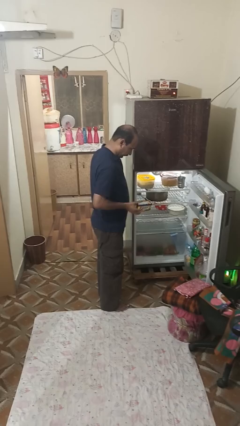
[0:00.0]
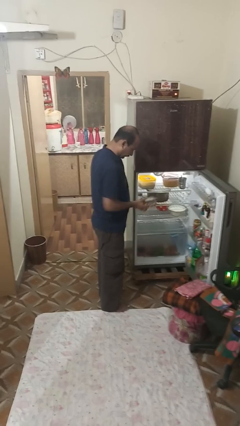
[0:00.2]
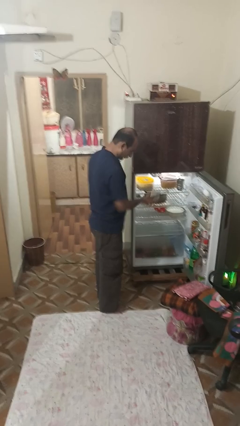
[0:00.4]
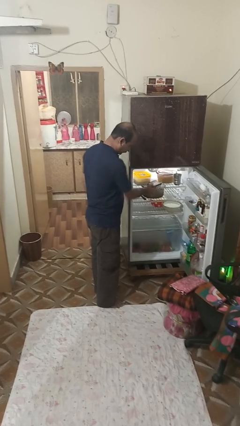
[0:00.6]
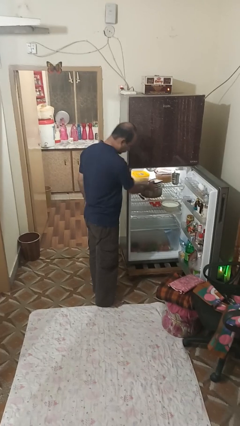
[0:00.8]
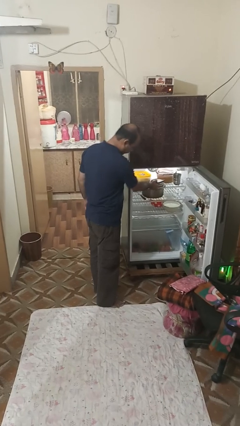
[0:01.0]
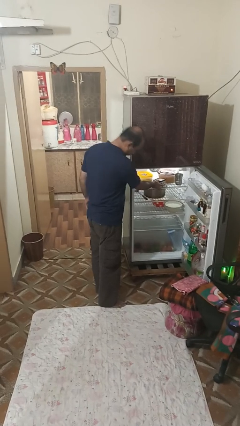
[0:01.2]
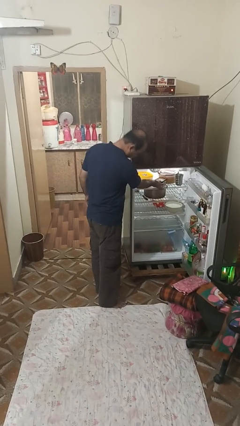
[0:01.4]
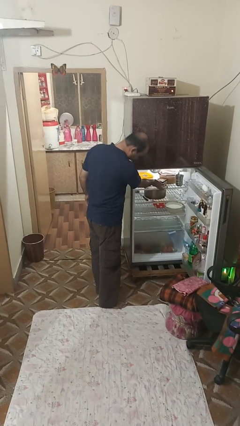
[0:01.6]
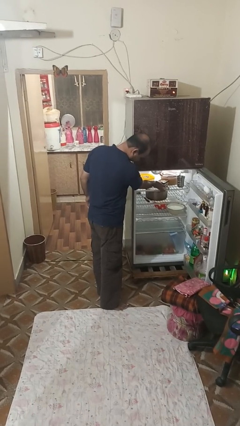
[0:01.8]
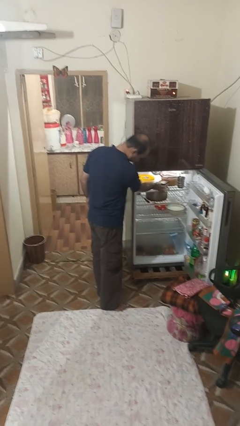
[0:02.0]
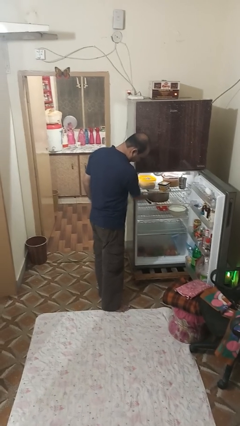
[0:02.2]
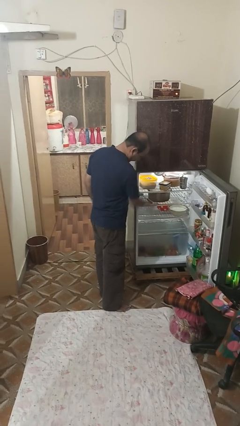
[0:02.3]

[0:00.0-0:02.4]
person puts object into refrigerator

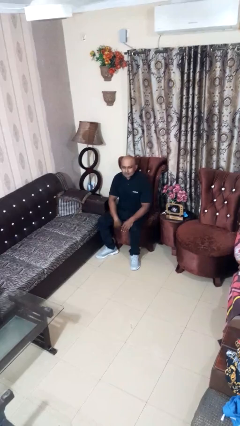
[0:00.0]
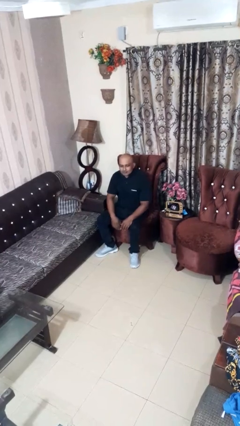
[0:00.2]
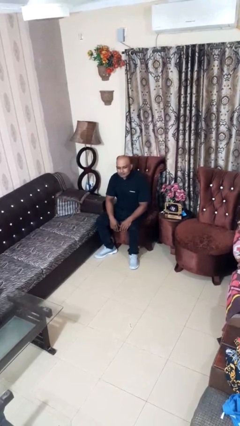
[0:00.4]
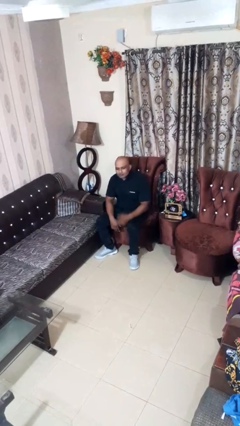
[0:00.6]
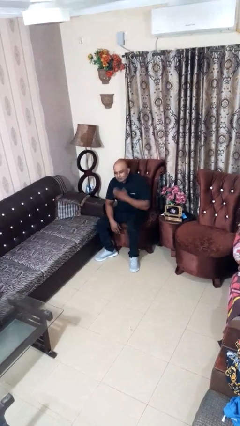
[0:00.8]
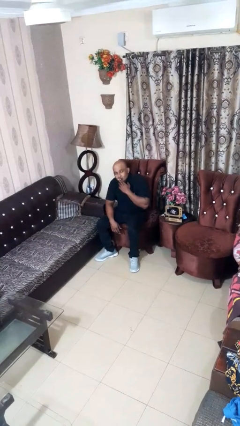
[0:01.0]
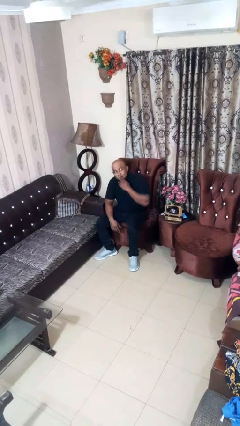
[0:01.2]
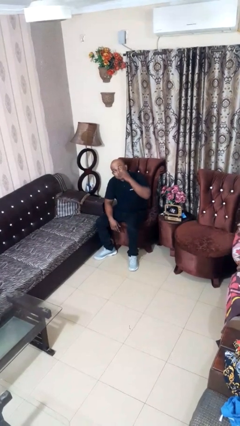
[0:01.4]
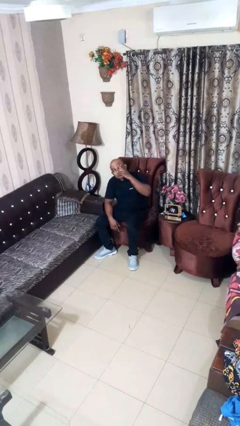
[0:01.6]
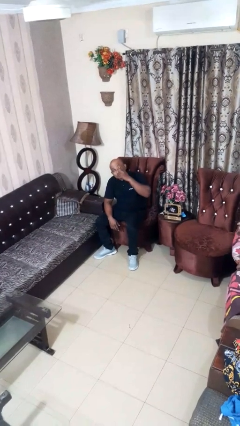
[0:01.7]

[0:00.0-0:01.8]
person gestures blow kiss

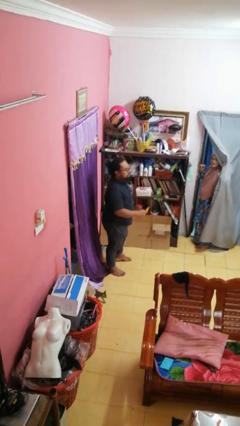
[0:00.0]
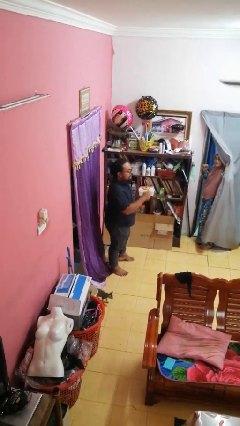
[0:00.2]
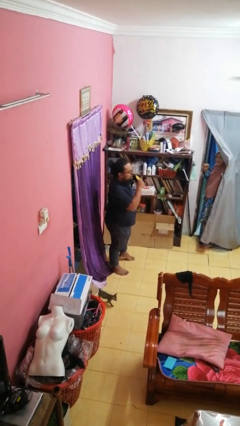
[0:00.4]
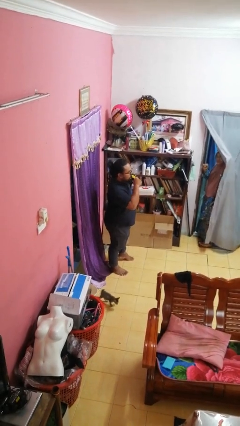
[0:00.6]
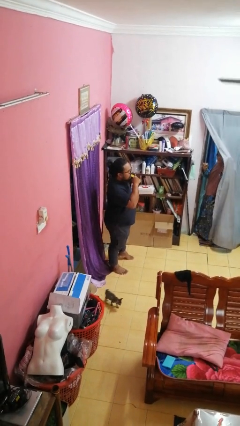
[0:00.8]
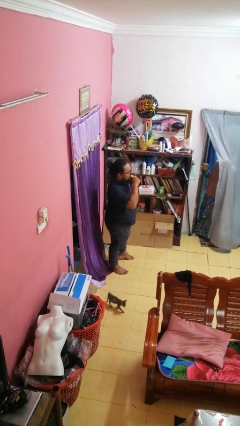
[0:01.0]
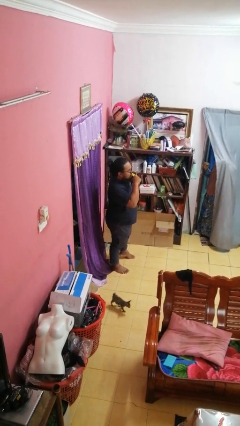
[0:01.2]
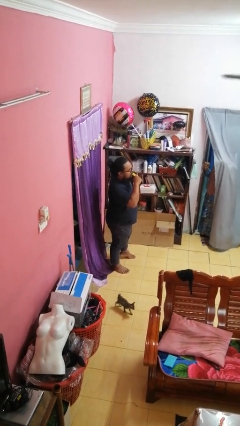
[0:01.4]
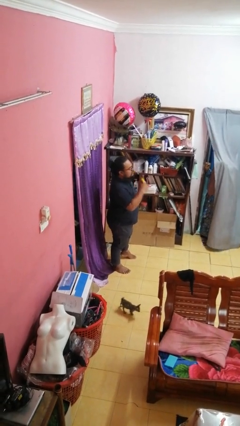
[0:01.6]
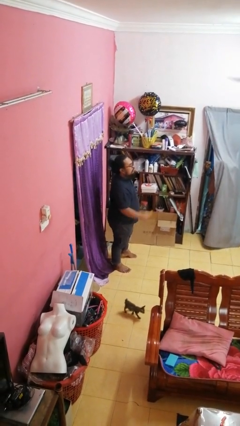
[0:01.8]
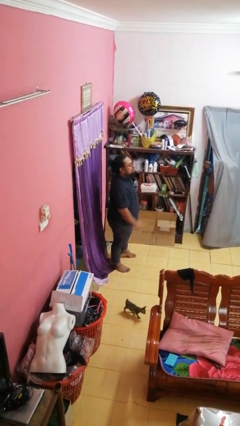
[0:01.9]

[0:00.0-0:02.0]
person eats banana

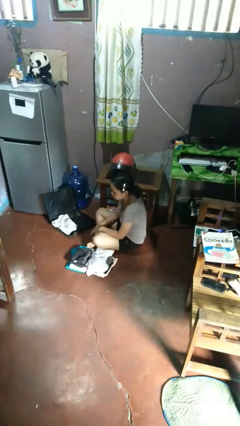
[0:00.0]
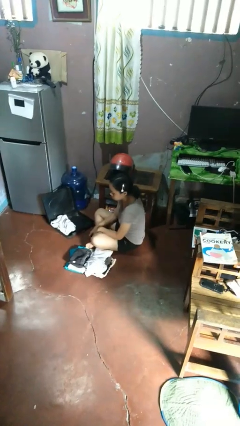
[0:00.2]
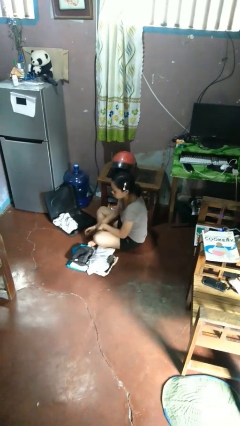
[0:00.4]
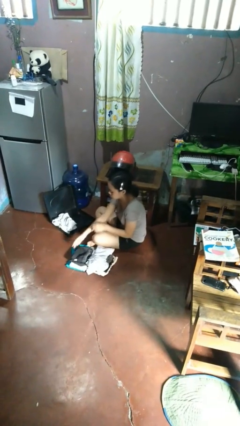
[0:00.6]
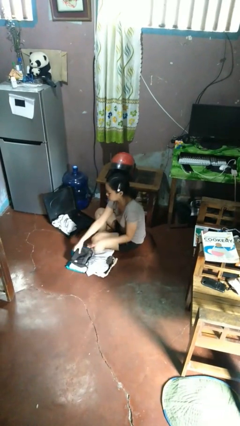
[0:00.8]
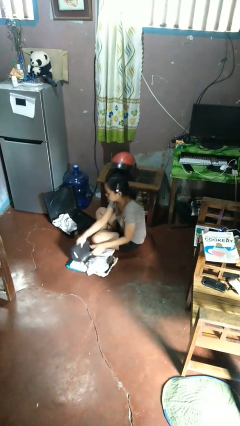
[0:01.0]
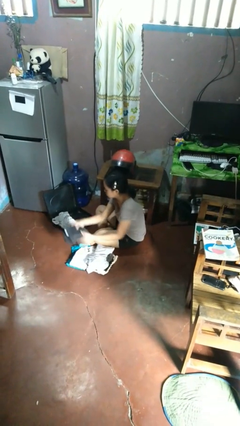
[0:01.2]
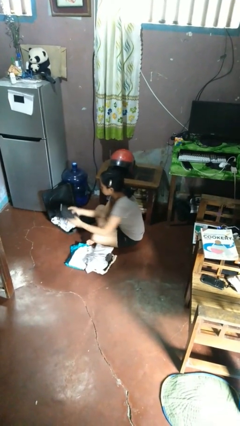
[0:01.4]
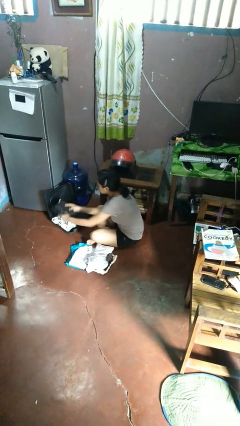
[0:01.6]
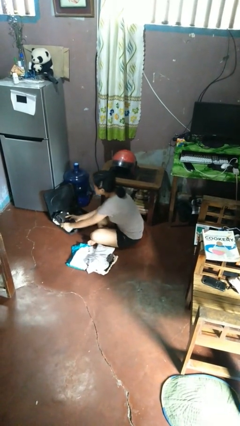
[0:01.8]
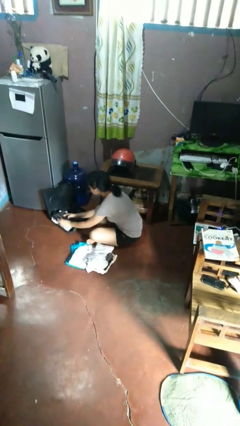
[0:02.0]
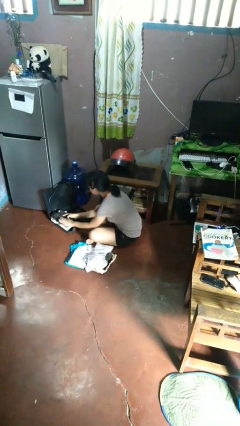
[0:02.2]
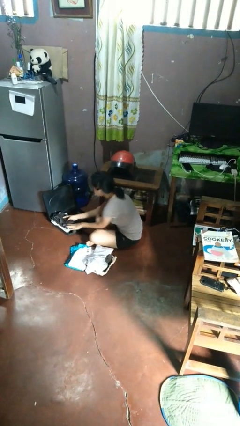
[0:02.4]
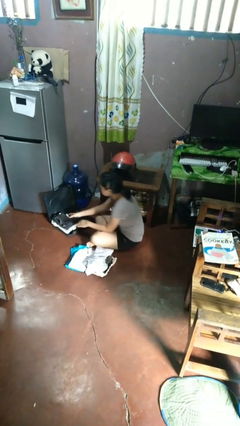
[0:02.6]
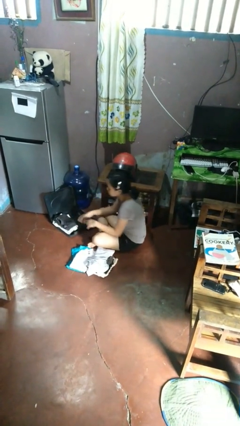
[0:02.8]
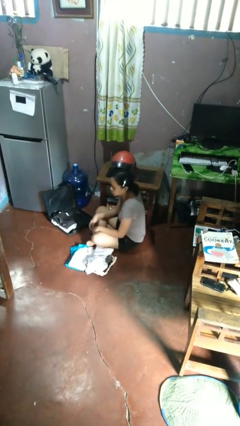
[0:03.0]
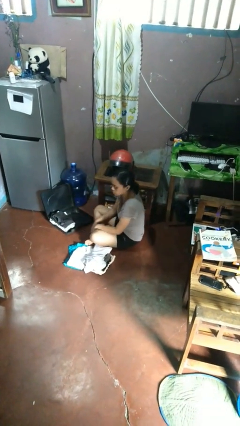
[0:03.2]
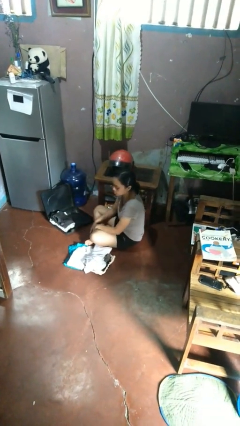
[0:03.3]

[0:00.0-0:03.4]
person loads clothes into suitcase

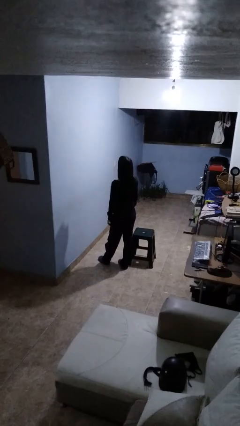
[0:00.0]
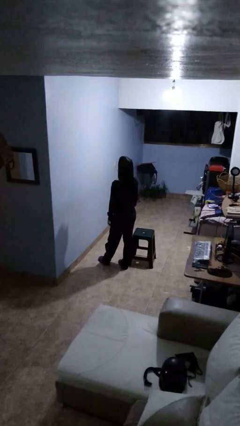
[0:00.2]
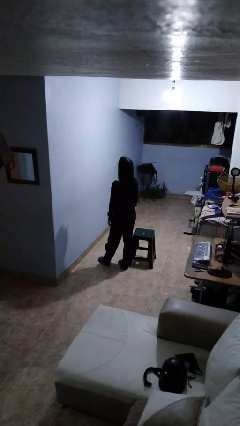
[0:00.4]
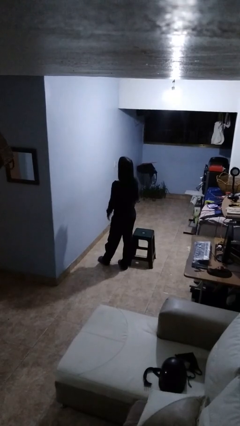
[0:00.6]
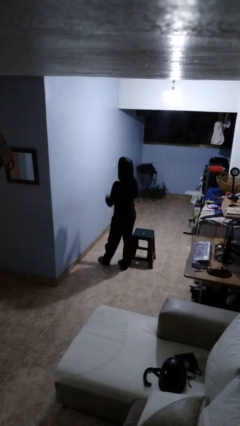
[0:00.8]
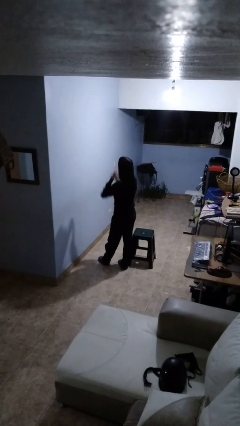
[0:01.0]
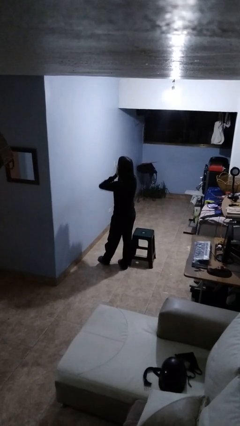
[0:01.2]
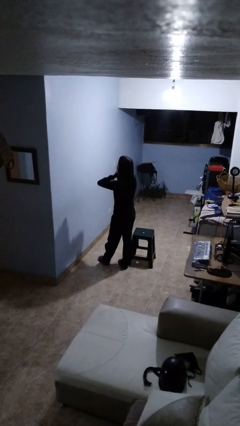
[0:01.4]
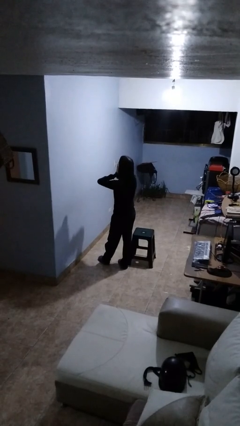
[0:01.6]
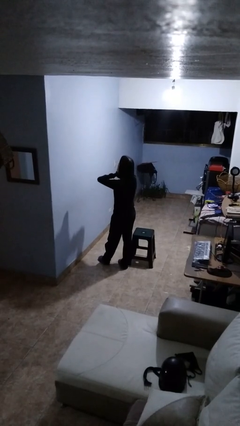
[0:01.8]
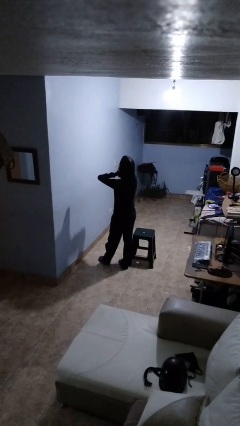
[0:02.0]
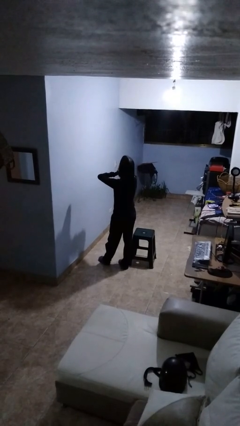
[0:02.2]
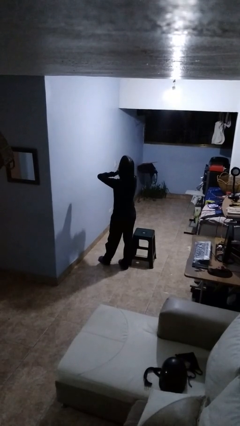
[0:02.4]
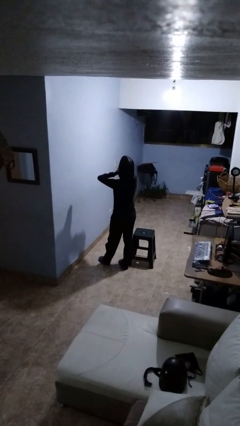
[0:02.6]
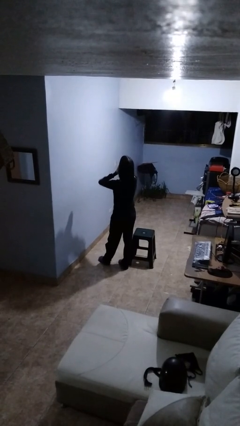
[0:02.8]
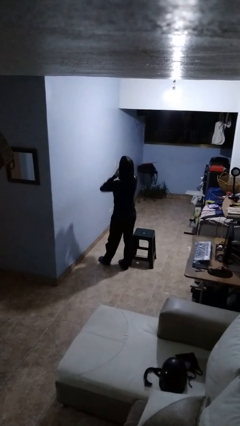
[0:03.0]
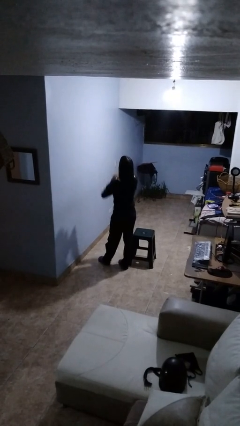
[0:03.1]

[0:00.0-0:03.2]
person yawns

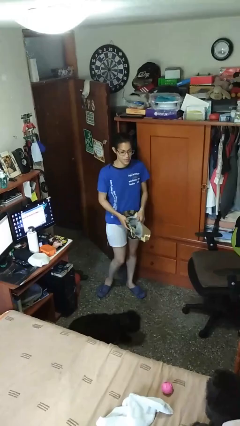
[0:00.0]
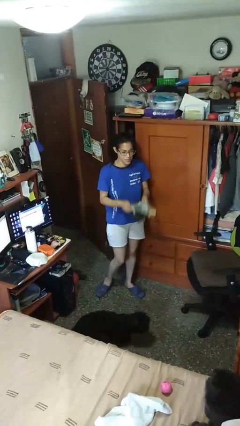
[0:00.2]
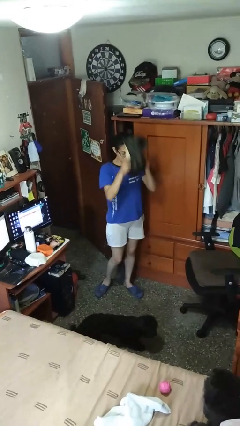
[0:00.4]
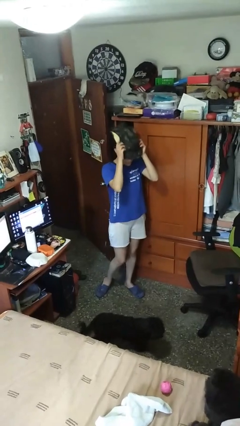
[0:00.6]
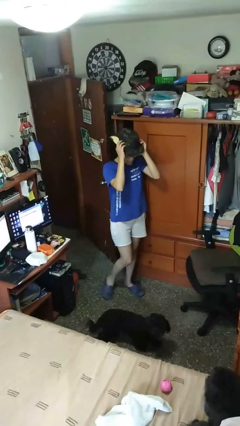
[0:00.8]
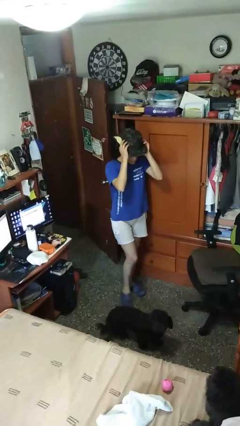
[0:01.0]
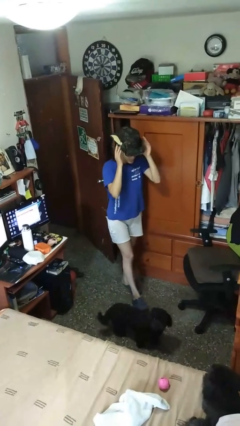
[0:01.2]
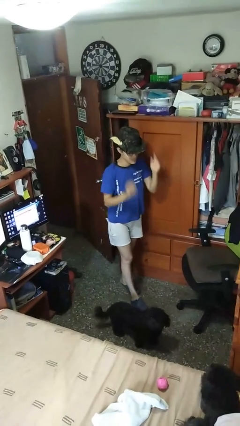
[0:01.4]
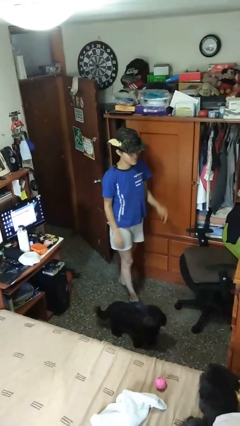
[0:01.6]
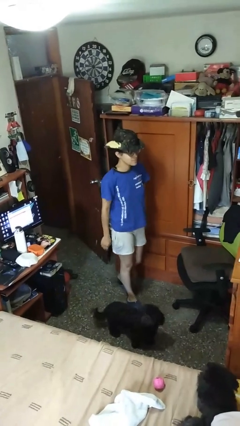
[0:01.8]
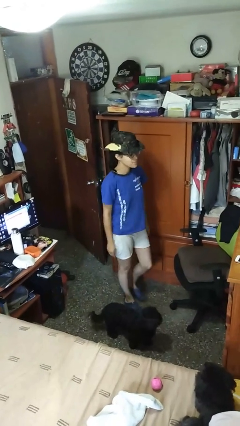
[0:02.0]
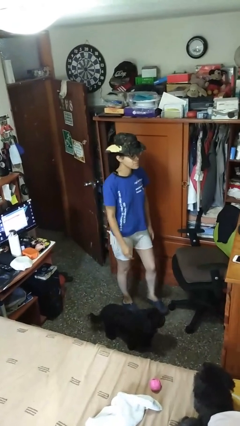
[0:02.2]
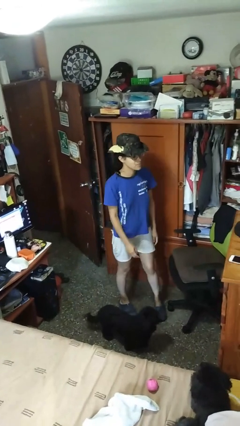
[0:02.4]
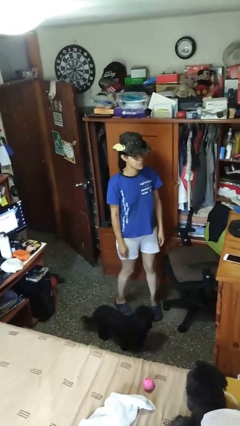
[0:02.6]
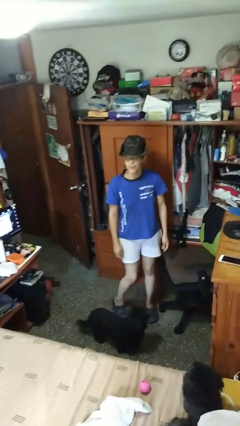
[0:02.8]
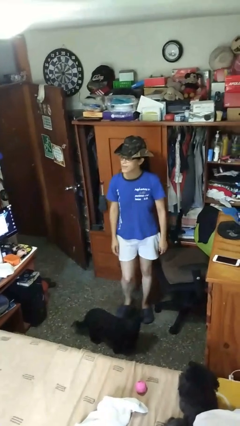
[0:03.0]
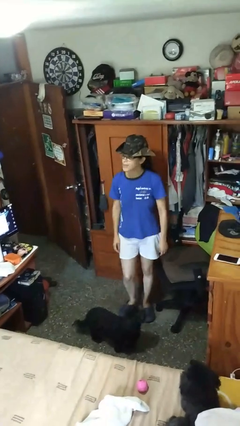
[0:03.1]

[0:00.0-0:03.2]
person puts on hat

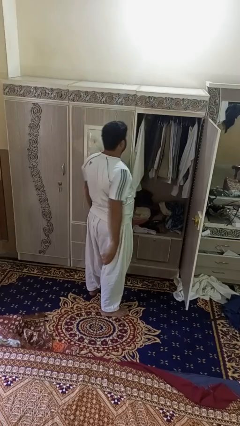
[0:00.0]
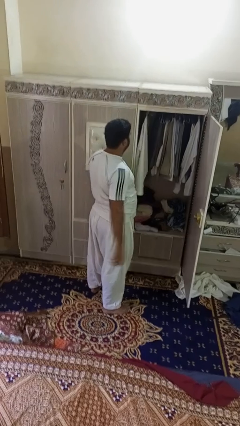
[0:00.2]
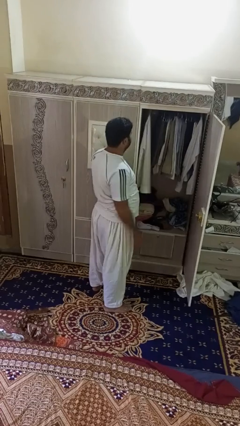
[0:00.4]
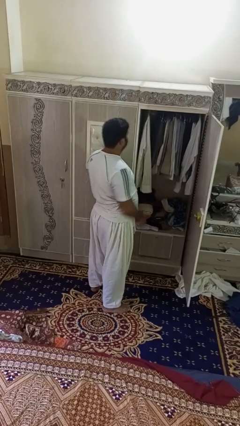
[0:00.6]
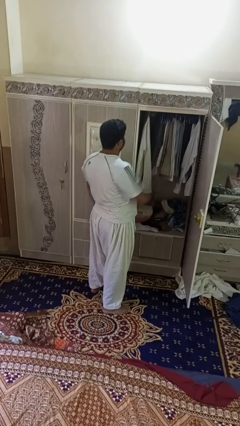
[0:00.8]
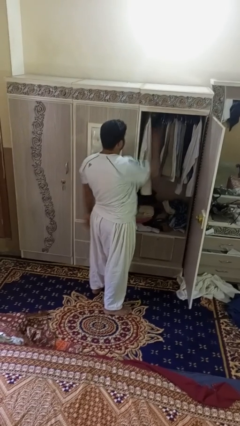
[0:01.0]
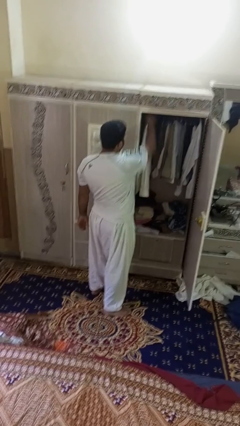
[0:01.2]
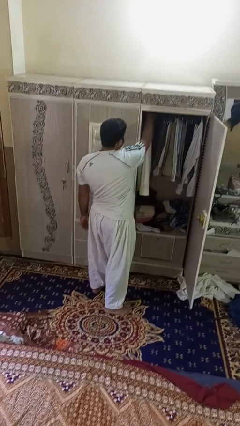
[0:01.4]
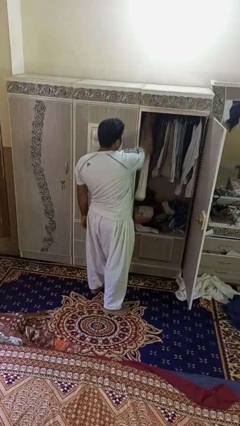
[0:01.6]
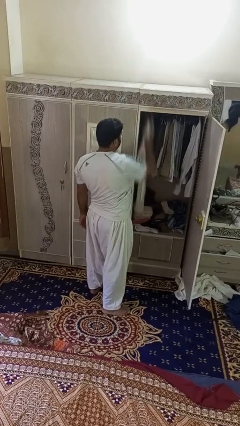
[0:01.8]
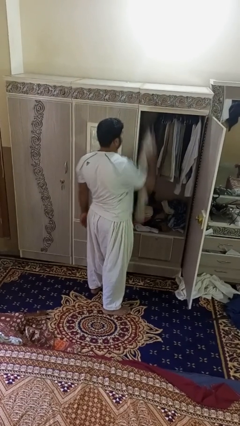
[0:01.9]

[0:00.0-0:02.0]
person takes clothes from closet
